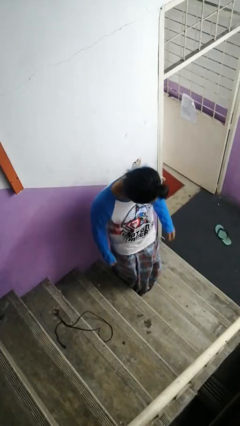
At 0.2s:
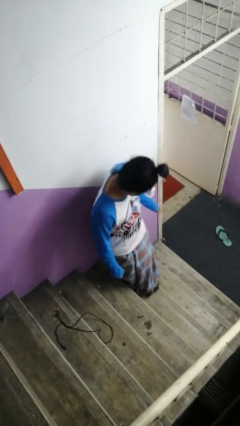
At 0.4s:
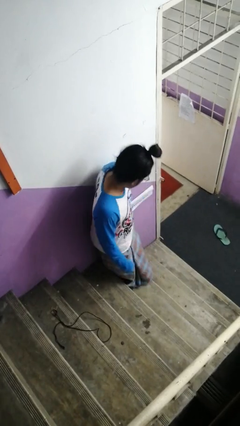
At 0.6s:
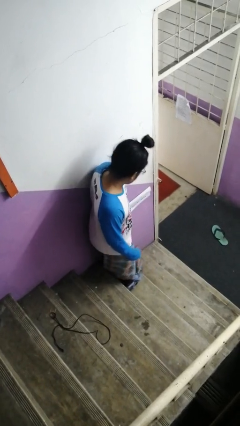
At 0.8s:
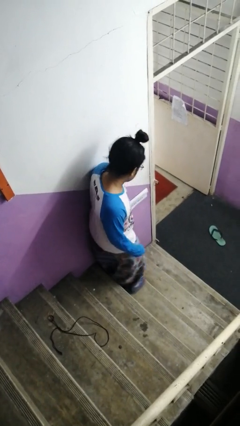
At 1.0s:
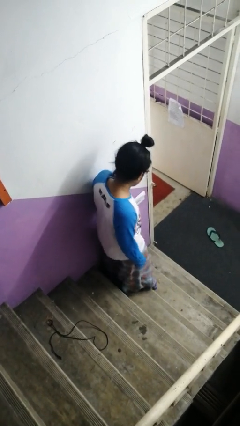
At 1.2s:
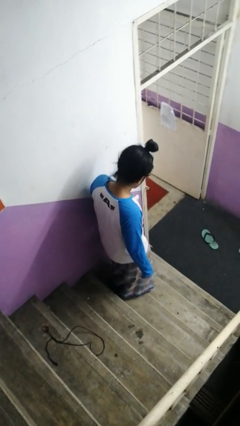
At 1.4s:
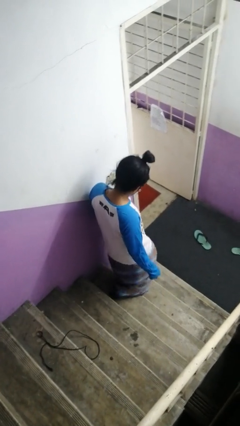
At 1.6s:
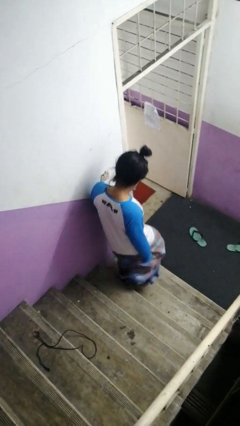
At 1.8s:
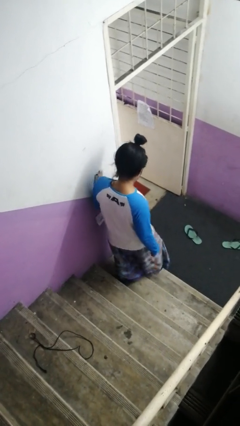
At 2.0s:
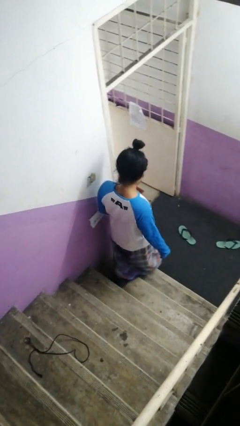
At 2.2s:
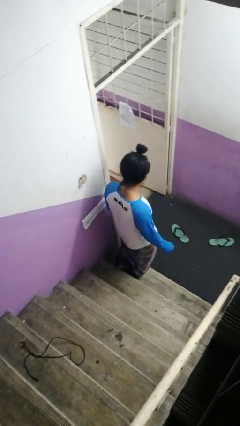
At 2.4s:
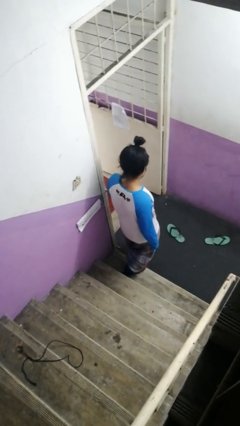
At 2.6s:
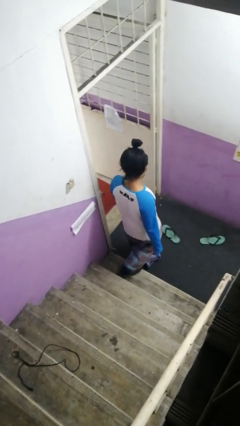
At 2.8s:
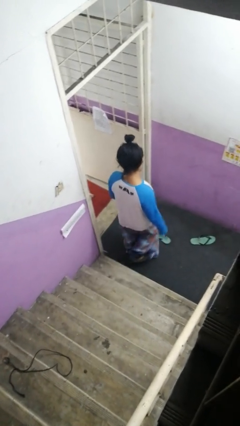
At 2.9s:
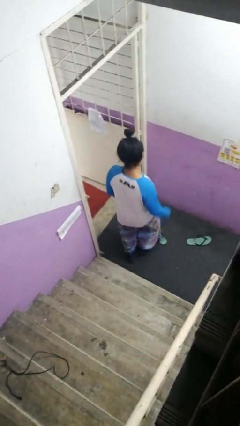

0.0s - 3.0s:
person climbs down stairs

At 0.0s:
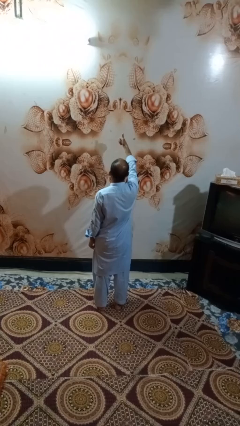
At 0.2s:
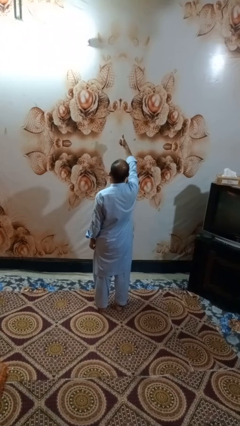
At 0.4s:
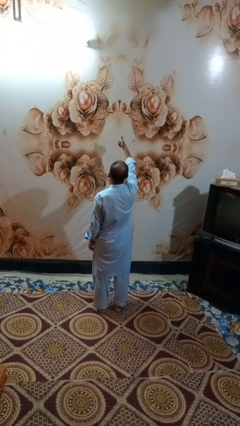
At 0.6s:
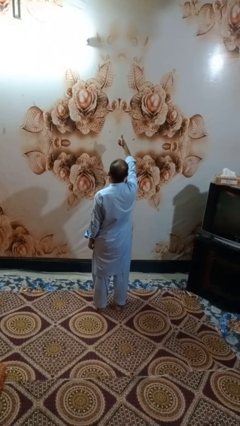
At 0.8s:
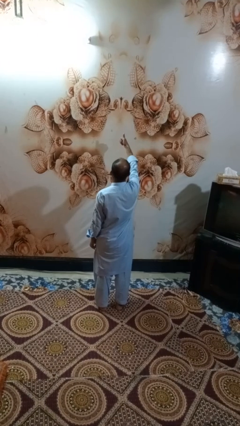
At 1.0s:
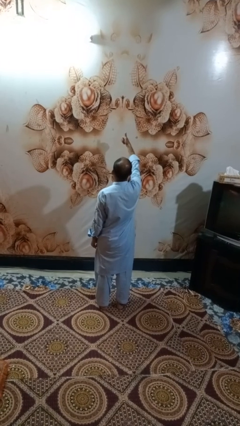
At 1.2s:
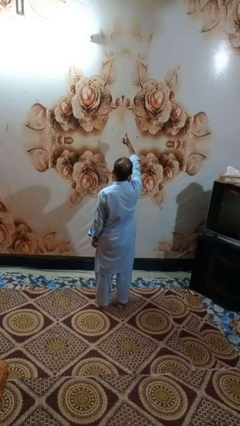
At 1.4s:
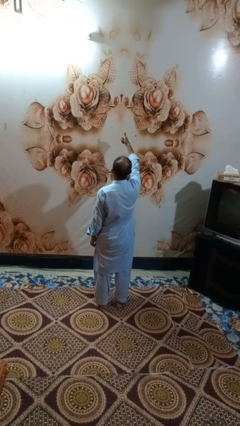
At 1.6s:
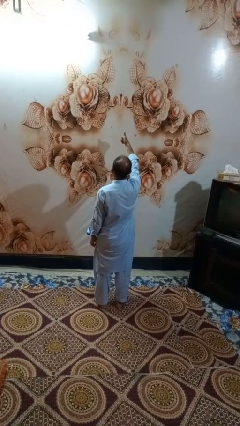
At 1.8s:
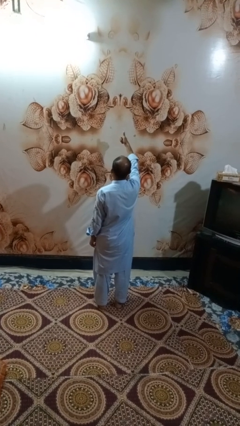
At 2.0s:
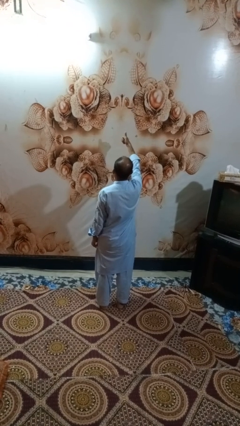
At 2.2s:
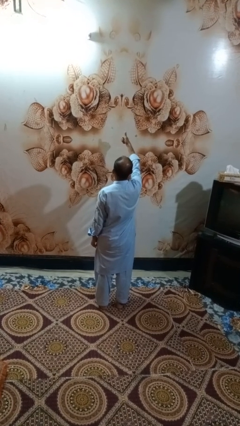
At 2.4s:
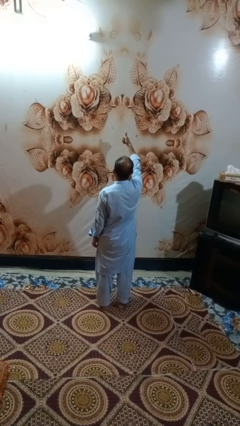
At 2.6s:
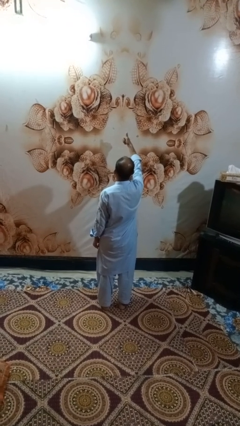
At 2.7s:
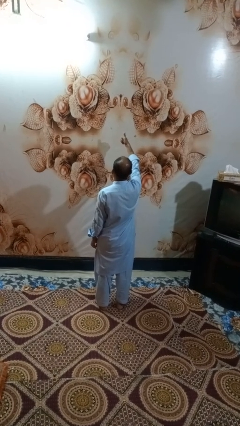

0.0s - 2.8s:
person gestures thumbs up

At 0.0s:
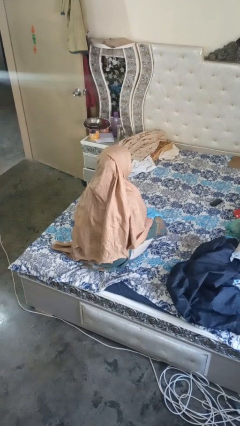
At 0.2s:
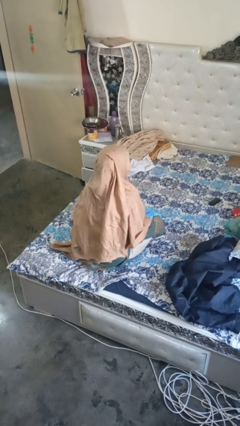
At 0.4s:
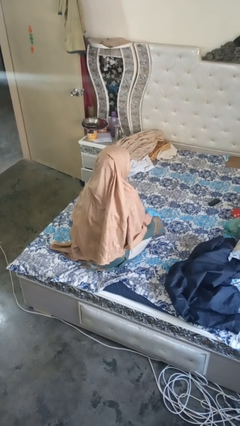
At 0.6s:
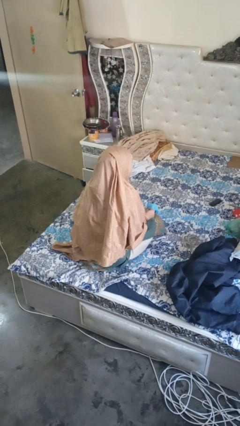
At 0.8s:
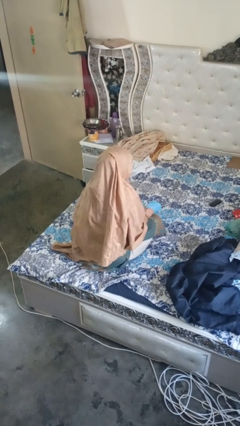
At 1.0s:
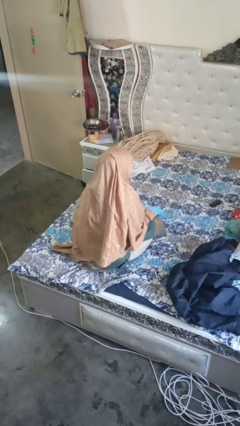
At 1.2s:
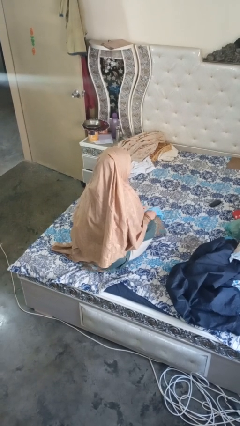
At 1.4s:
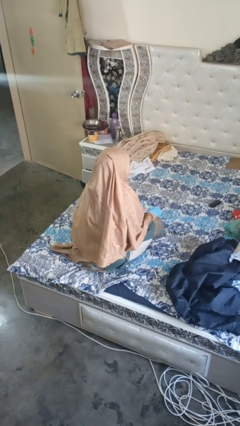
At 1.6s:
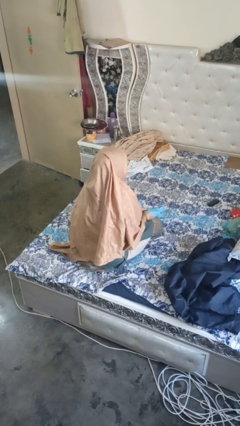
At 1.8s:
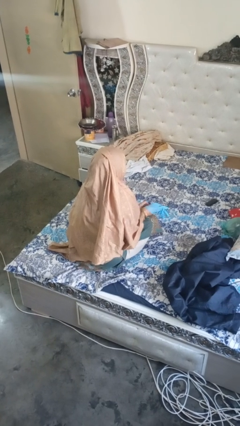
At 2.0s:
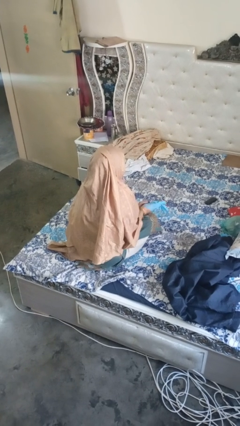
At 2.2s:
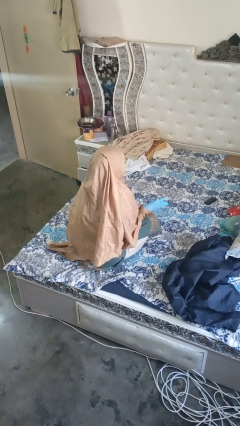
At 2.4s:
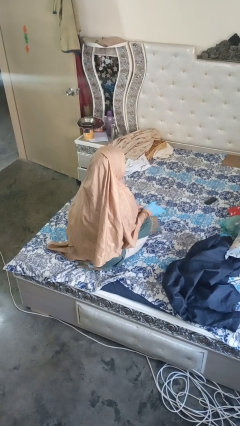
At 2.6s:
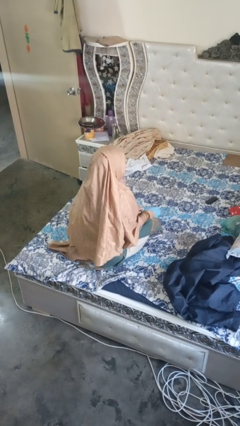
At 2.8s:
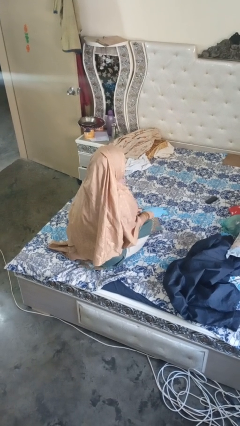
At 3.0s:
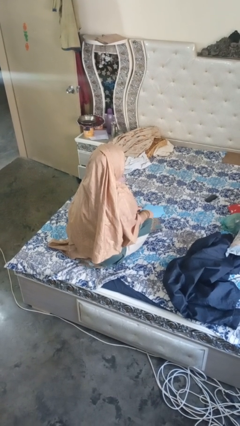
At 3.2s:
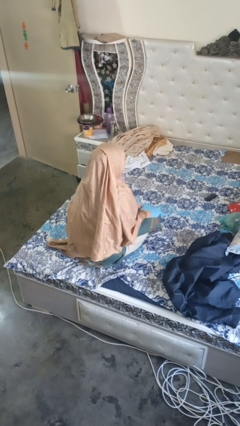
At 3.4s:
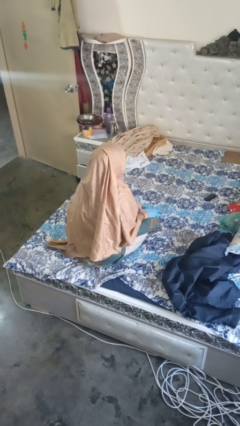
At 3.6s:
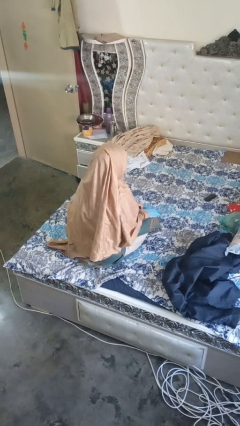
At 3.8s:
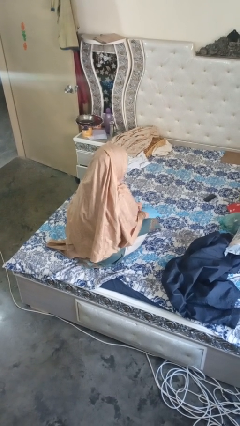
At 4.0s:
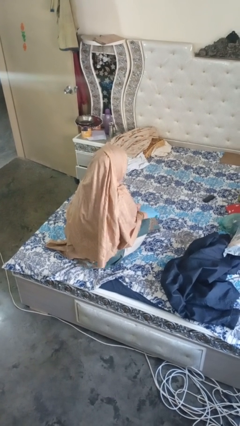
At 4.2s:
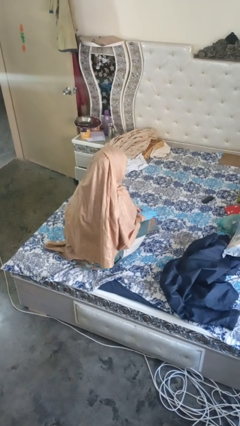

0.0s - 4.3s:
person puts on gloves

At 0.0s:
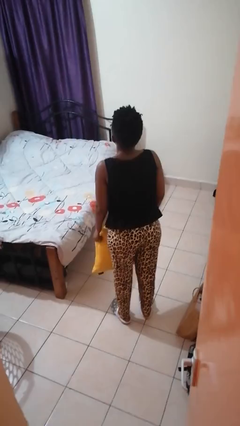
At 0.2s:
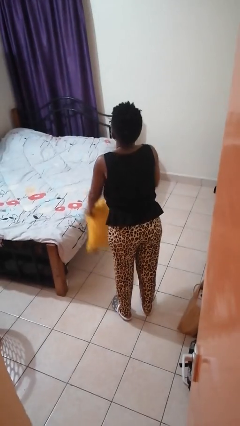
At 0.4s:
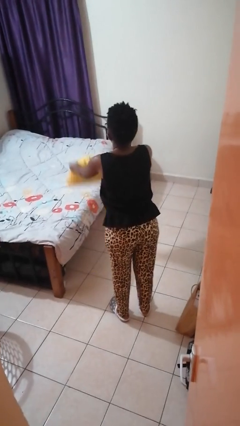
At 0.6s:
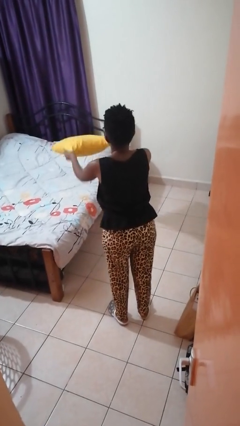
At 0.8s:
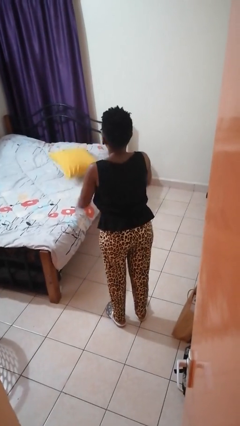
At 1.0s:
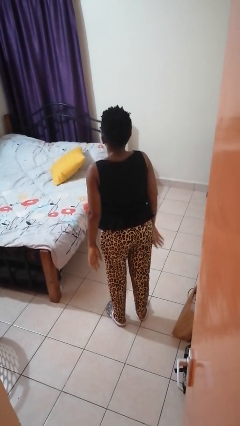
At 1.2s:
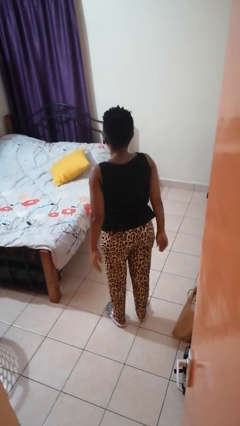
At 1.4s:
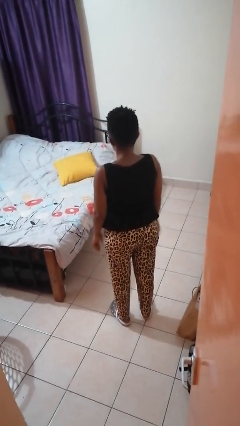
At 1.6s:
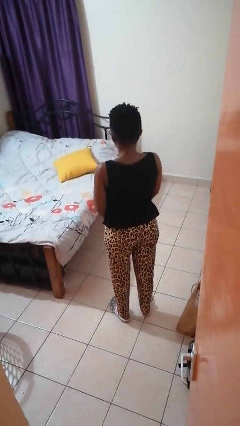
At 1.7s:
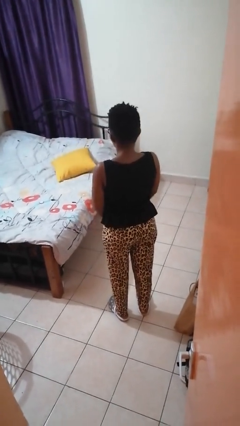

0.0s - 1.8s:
person throws object on bed

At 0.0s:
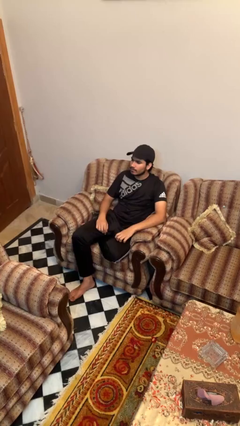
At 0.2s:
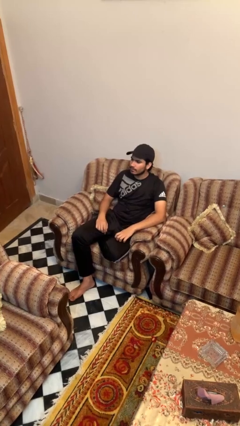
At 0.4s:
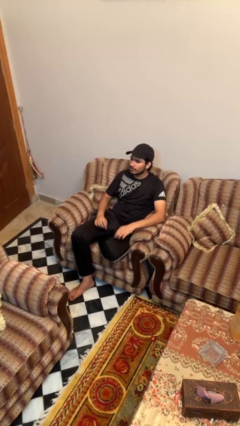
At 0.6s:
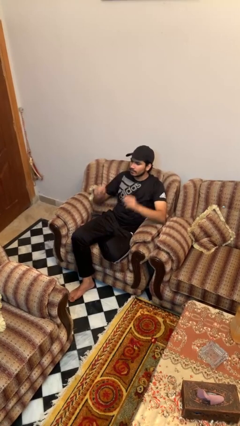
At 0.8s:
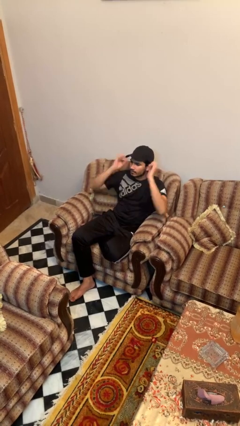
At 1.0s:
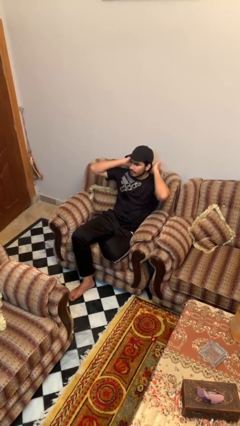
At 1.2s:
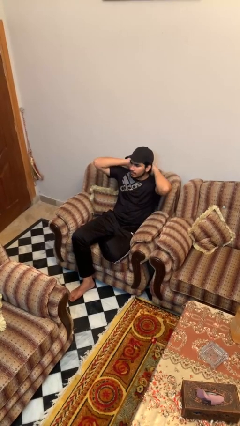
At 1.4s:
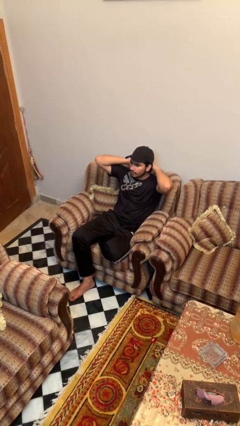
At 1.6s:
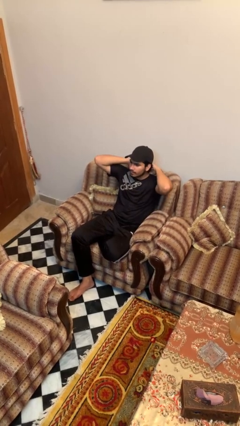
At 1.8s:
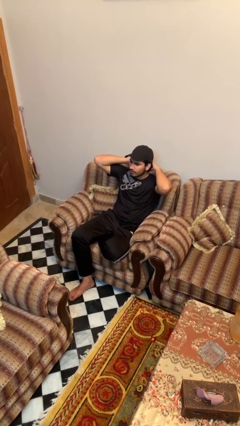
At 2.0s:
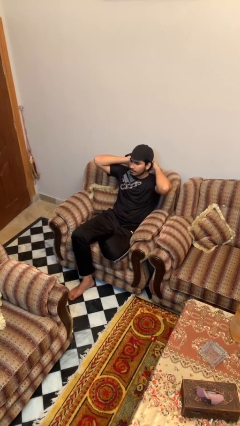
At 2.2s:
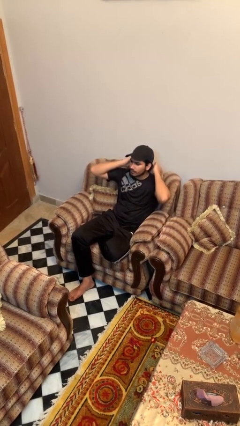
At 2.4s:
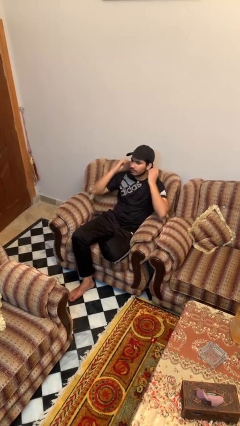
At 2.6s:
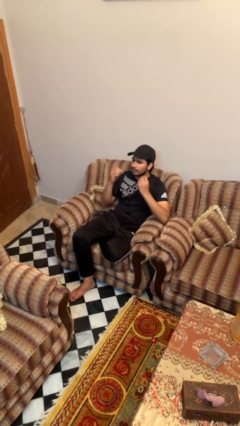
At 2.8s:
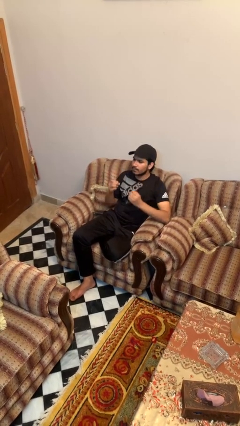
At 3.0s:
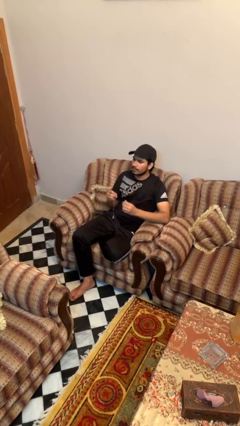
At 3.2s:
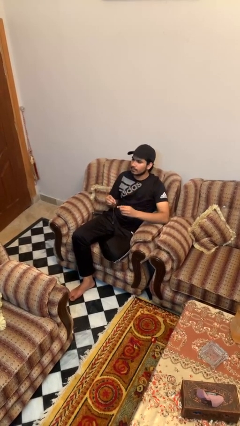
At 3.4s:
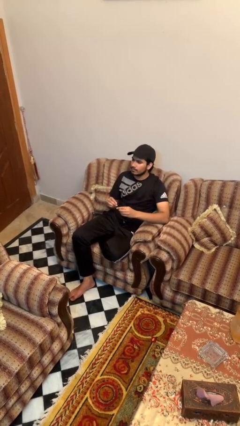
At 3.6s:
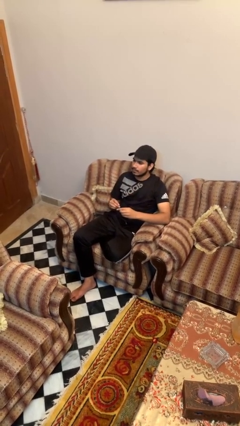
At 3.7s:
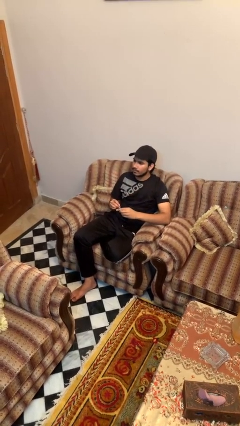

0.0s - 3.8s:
person takes off necklace

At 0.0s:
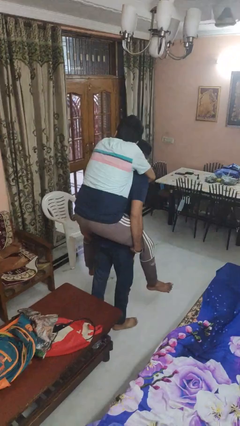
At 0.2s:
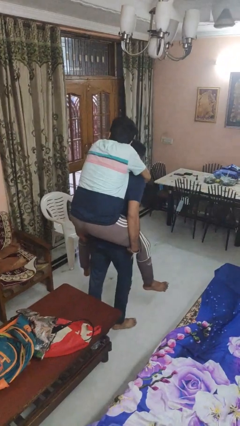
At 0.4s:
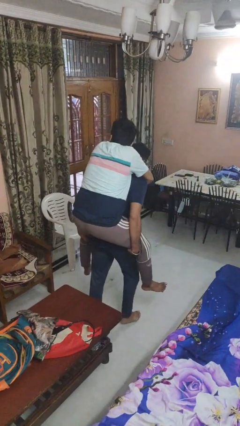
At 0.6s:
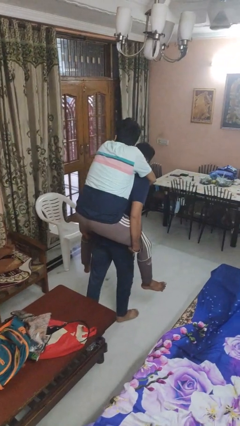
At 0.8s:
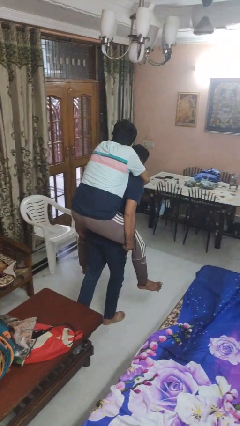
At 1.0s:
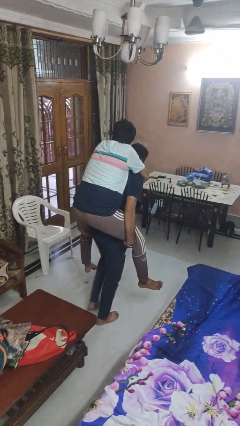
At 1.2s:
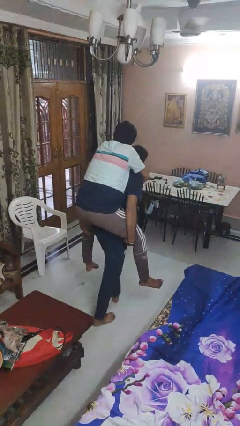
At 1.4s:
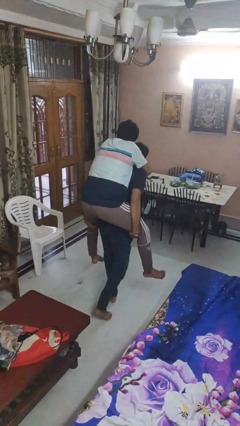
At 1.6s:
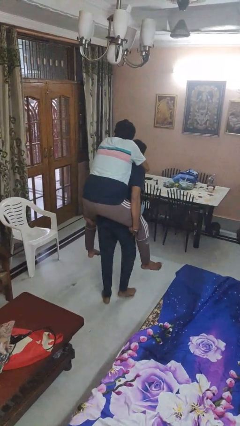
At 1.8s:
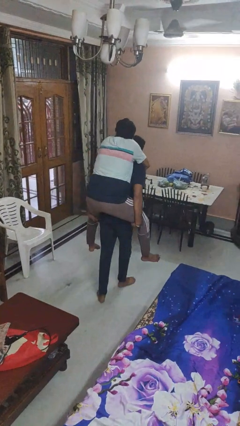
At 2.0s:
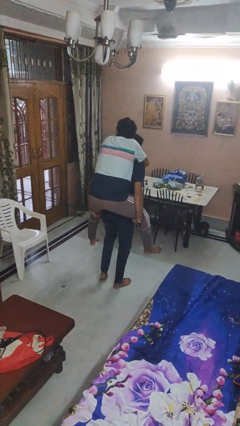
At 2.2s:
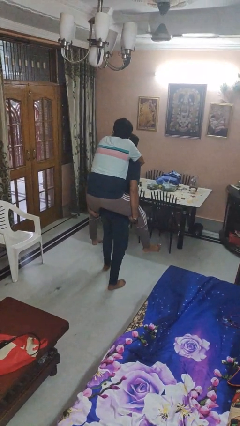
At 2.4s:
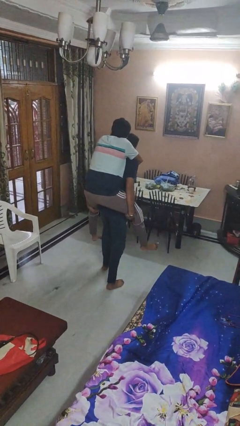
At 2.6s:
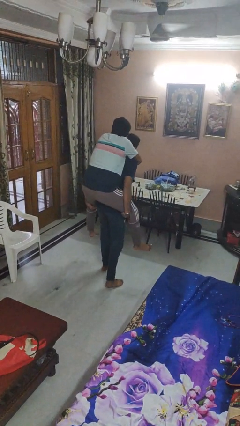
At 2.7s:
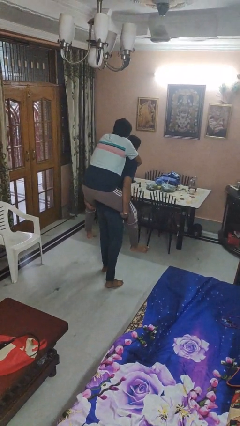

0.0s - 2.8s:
person carries person on back
